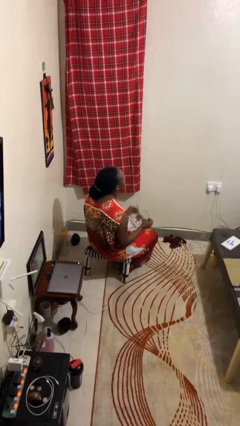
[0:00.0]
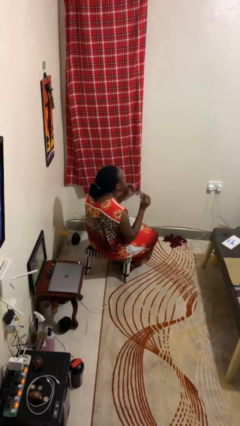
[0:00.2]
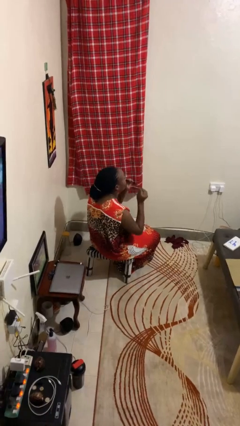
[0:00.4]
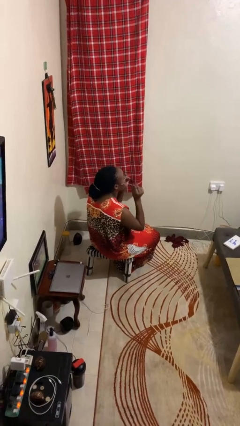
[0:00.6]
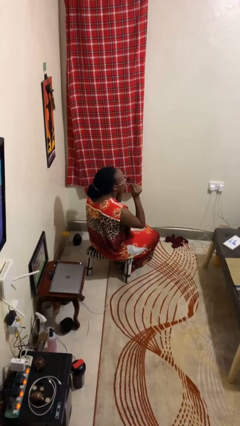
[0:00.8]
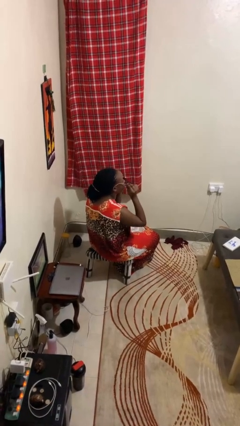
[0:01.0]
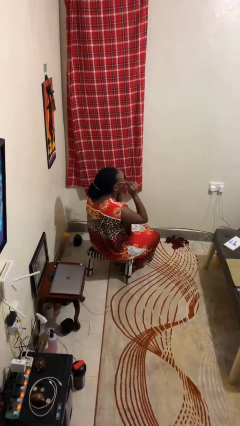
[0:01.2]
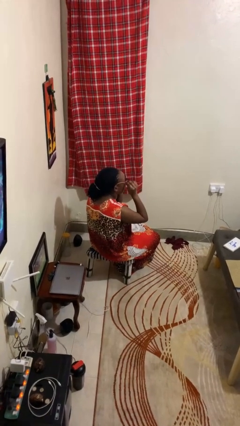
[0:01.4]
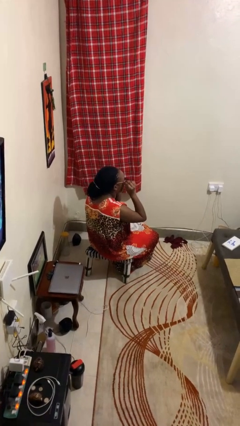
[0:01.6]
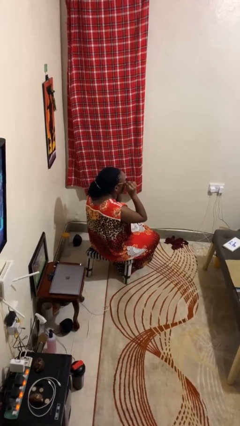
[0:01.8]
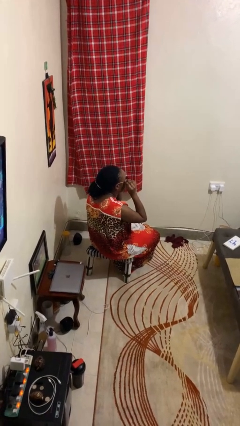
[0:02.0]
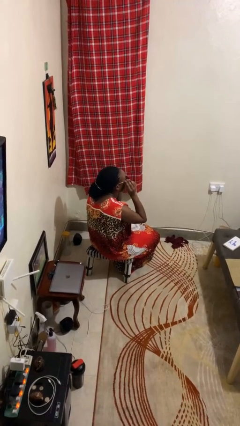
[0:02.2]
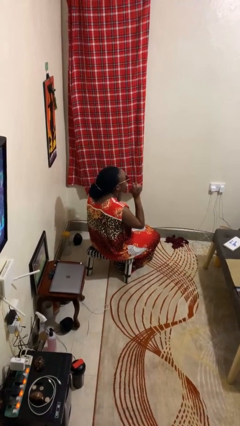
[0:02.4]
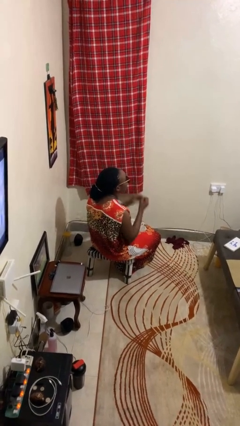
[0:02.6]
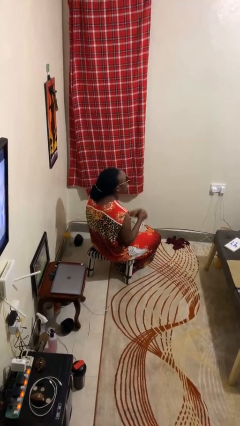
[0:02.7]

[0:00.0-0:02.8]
person puts on sunglasses

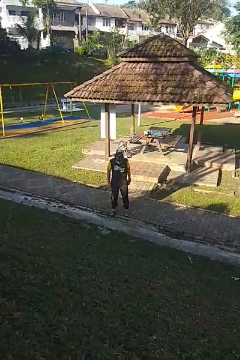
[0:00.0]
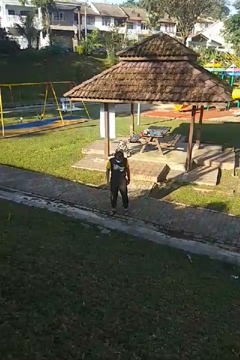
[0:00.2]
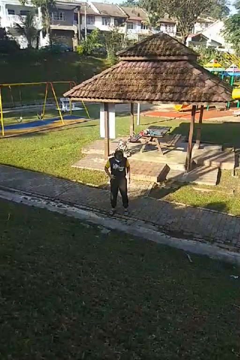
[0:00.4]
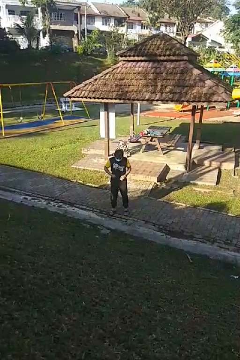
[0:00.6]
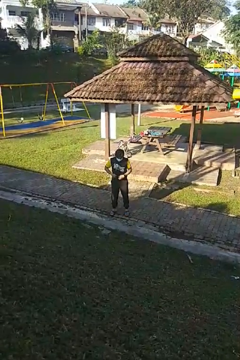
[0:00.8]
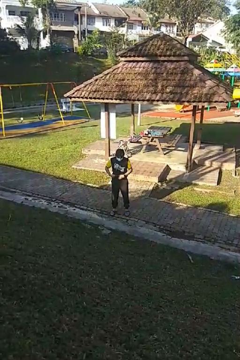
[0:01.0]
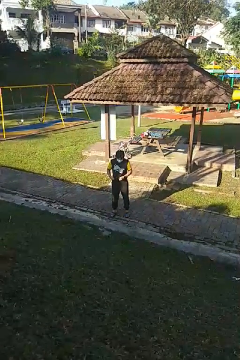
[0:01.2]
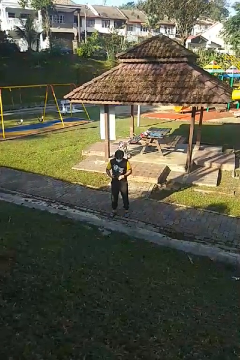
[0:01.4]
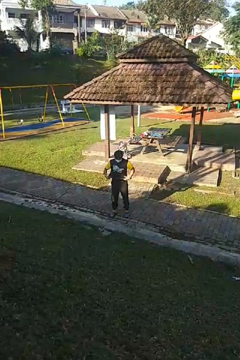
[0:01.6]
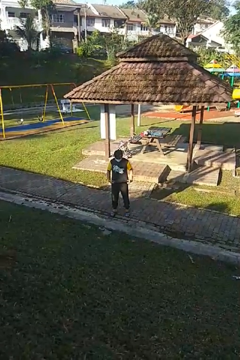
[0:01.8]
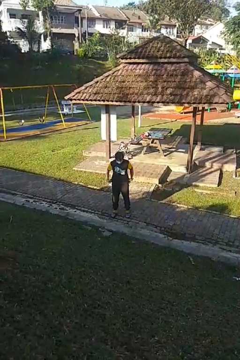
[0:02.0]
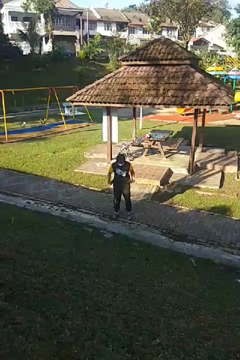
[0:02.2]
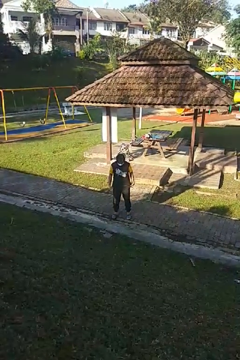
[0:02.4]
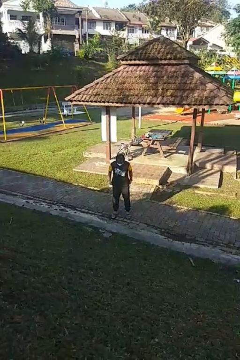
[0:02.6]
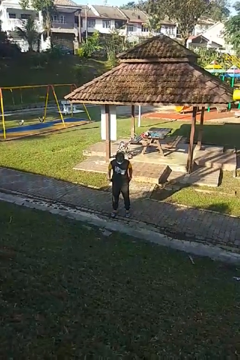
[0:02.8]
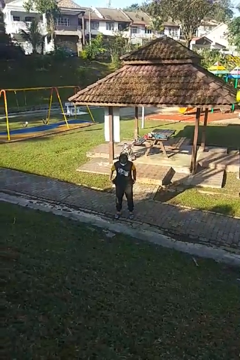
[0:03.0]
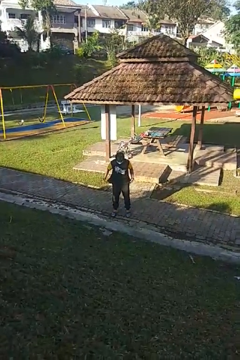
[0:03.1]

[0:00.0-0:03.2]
person untucks shirt

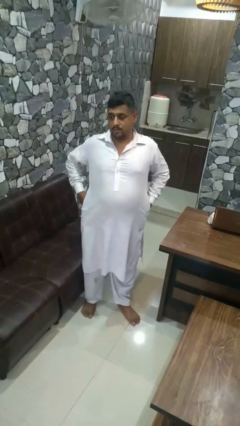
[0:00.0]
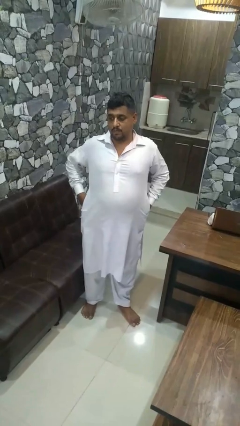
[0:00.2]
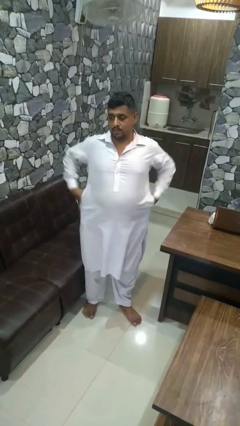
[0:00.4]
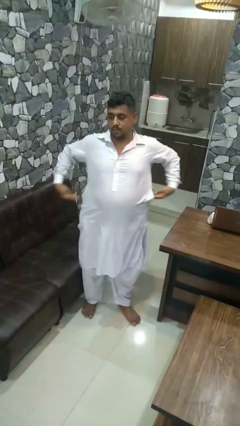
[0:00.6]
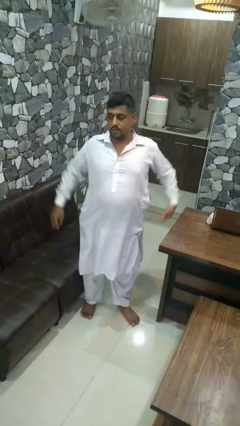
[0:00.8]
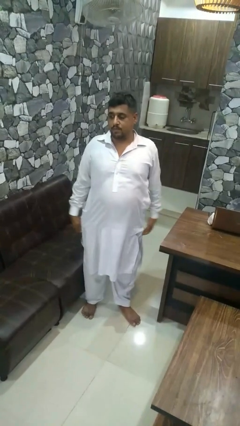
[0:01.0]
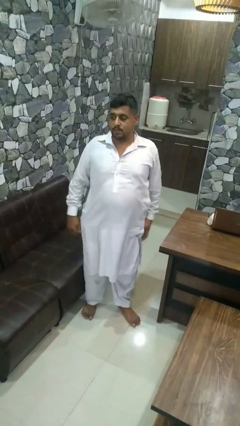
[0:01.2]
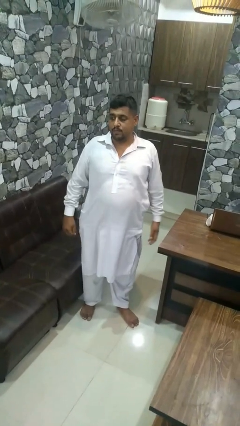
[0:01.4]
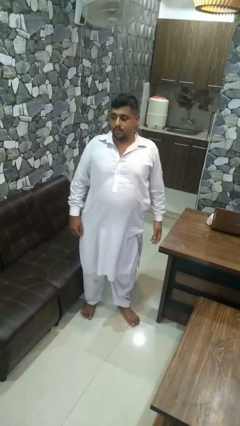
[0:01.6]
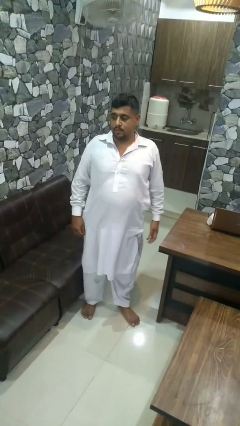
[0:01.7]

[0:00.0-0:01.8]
person puts hands in back pockets

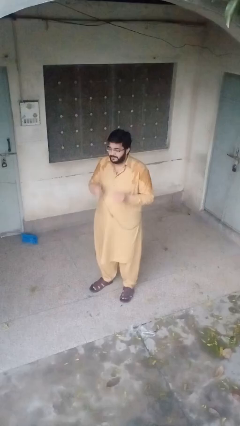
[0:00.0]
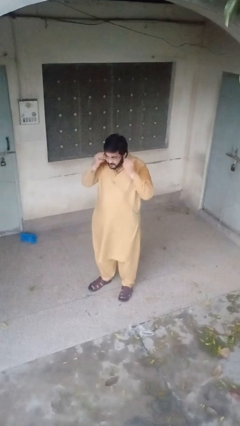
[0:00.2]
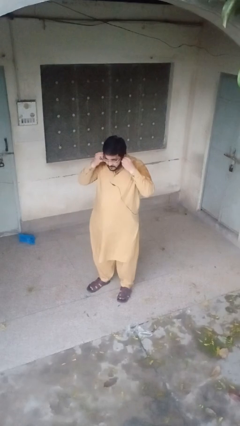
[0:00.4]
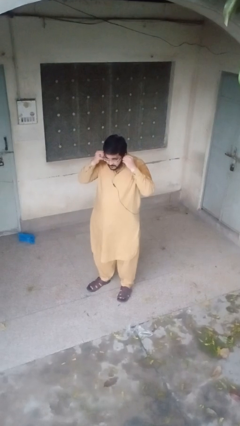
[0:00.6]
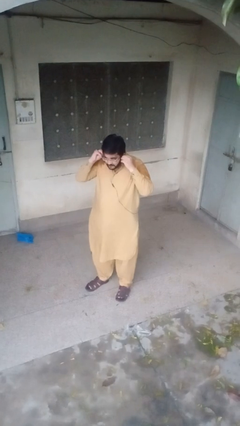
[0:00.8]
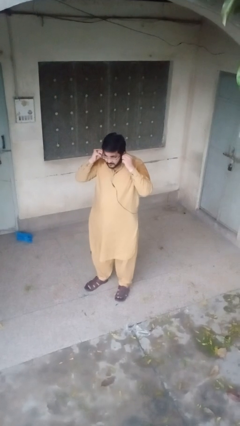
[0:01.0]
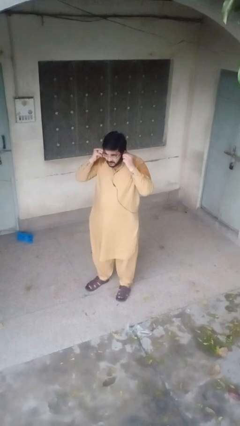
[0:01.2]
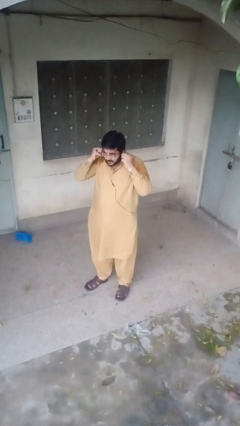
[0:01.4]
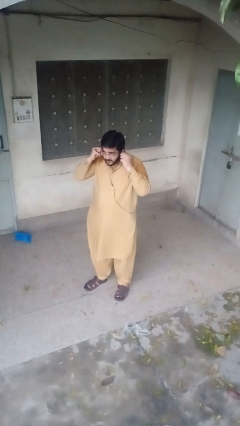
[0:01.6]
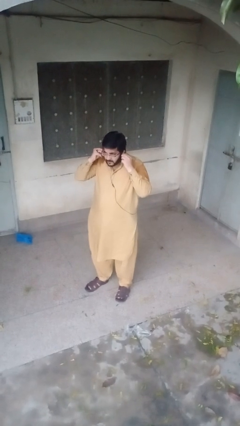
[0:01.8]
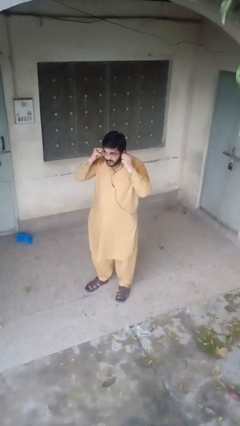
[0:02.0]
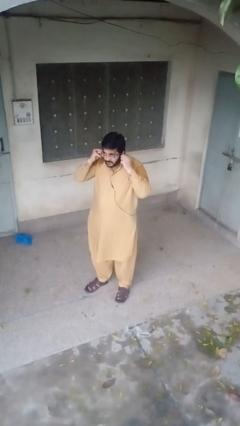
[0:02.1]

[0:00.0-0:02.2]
person puts on headphones

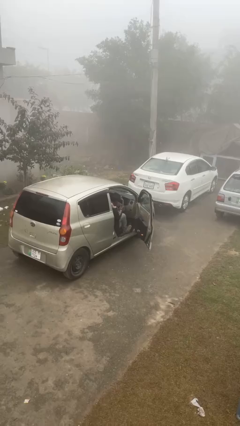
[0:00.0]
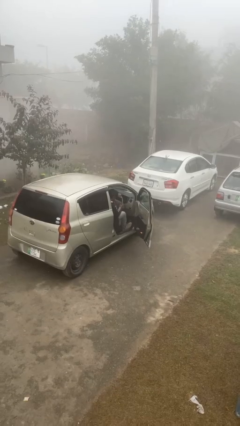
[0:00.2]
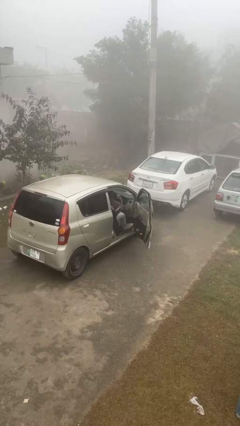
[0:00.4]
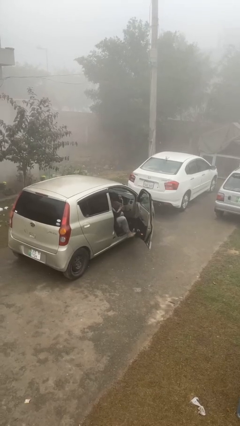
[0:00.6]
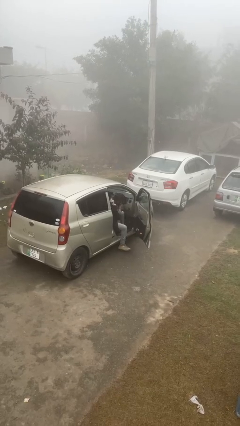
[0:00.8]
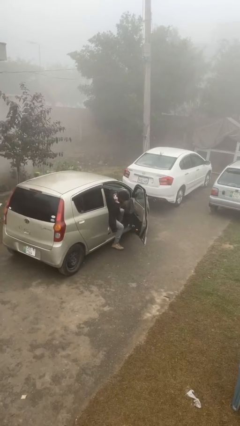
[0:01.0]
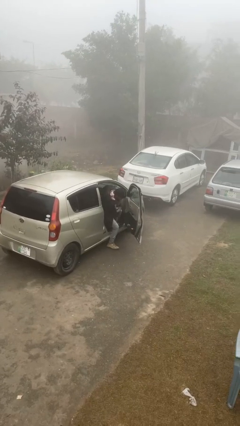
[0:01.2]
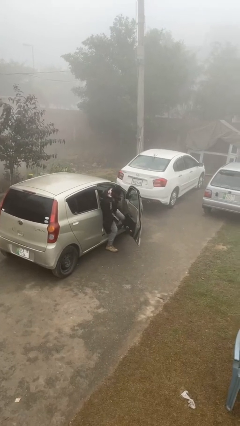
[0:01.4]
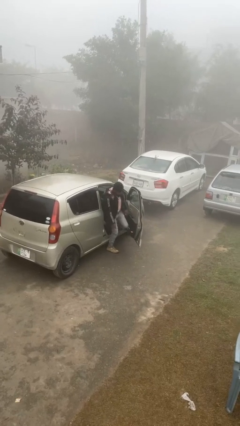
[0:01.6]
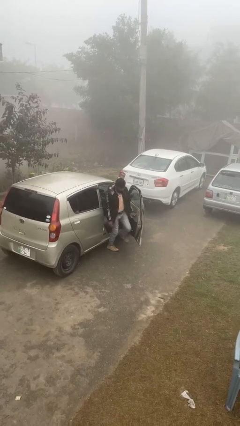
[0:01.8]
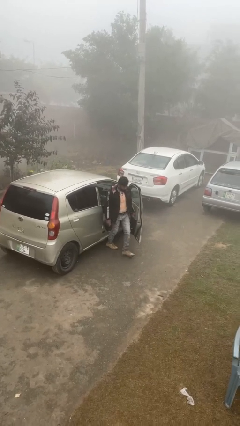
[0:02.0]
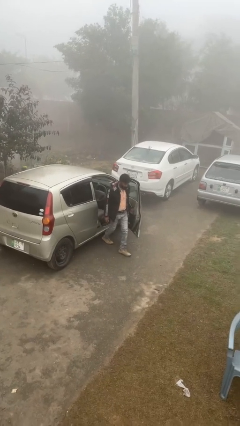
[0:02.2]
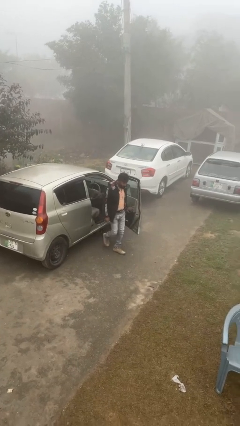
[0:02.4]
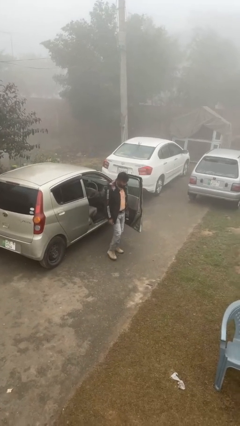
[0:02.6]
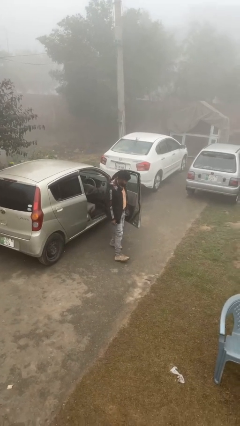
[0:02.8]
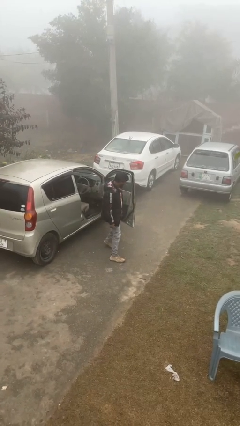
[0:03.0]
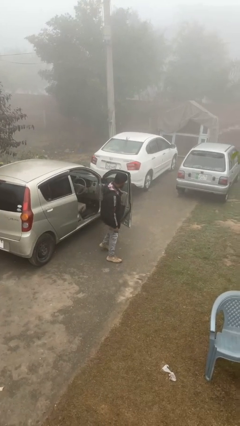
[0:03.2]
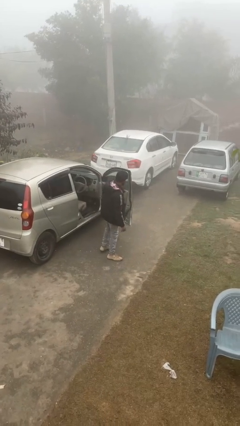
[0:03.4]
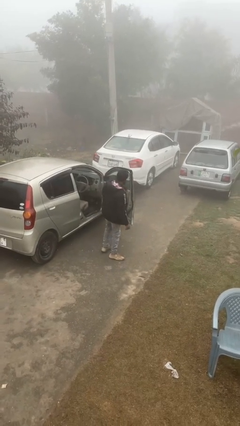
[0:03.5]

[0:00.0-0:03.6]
person exits car

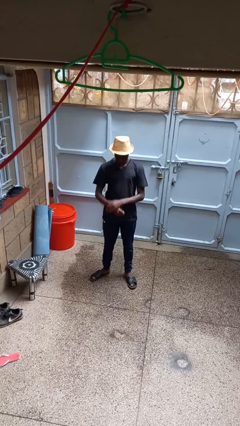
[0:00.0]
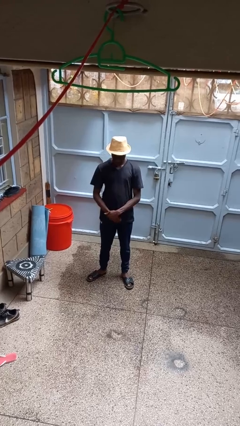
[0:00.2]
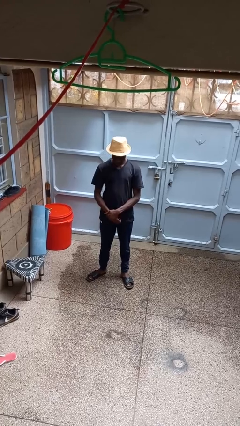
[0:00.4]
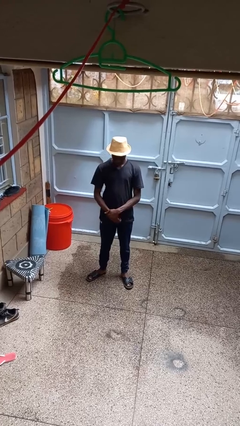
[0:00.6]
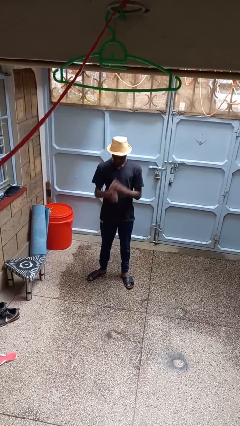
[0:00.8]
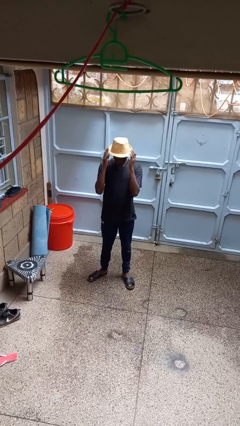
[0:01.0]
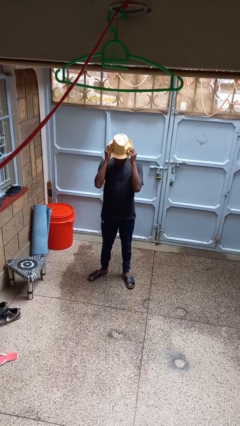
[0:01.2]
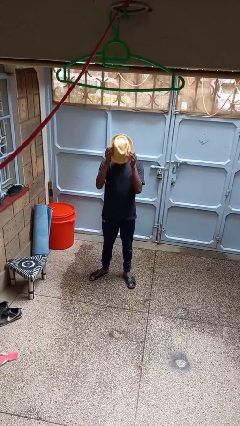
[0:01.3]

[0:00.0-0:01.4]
person takes off hat

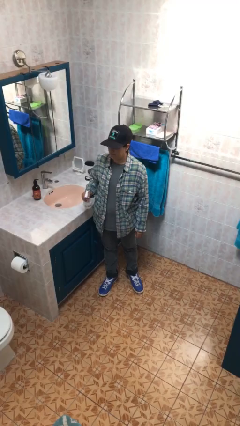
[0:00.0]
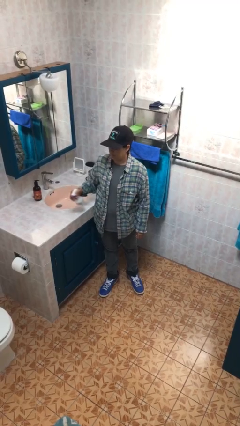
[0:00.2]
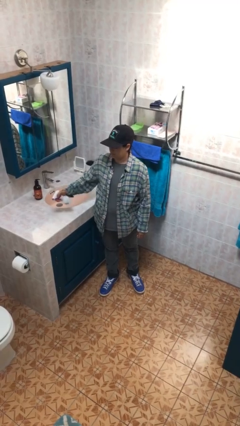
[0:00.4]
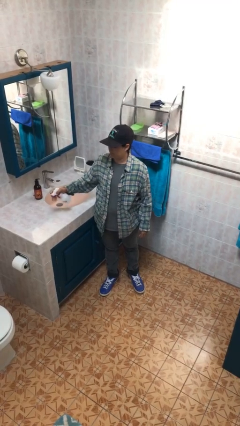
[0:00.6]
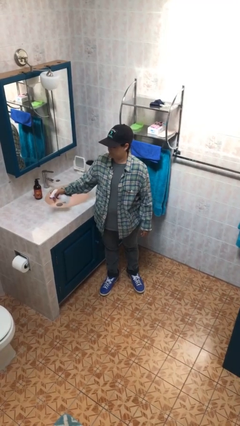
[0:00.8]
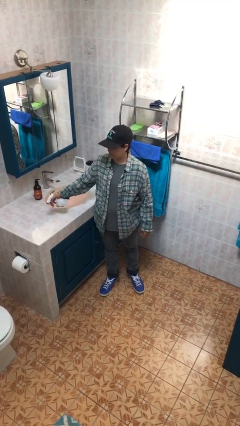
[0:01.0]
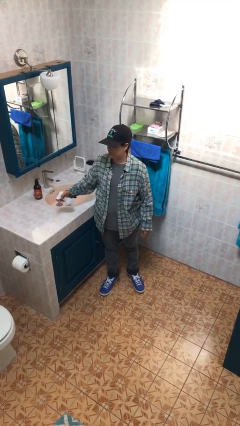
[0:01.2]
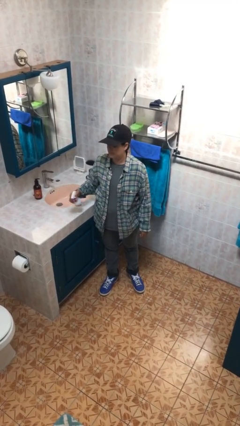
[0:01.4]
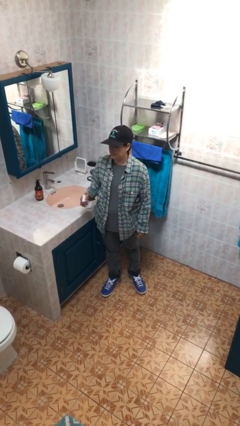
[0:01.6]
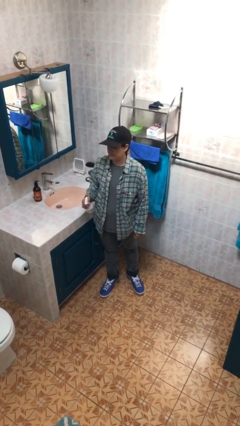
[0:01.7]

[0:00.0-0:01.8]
person sprays from bottle

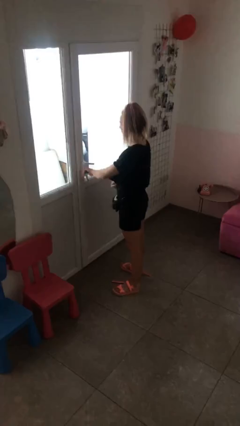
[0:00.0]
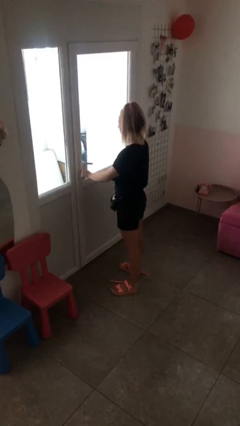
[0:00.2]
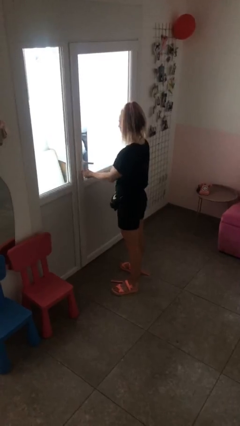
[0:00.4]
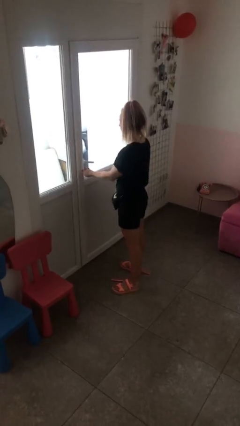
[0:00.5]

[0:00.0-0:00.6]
person locks door with keys

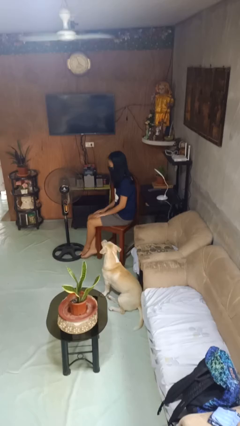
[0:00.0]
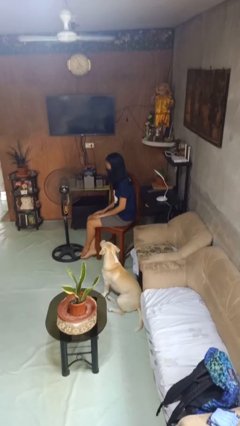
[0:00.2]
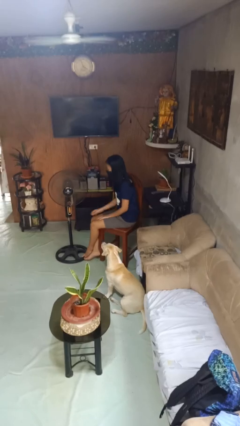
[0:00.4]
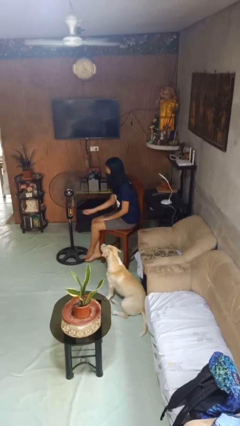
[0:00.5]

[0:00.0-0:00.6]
person turns on fan
